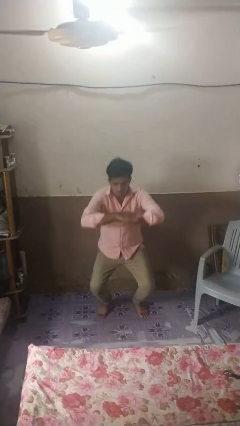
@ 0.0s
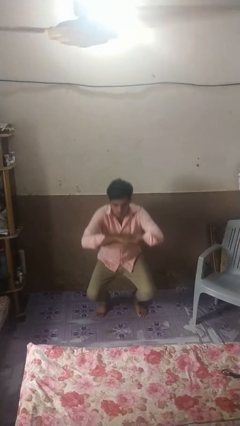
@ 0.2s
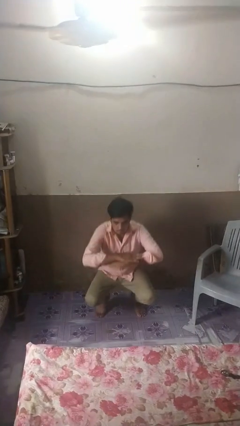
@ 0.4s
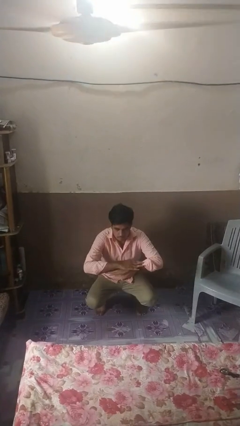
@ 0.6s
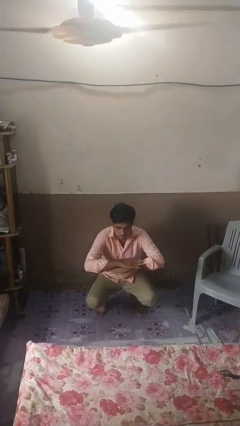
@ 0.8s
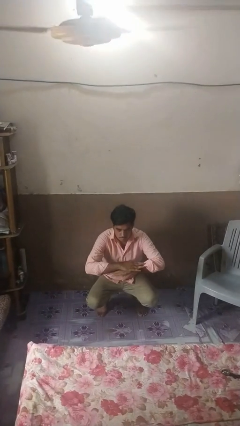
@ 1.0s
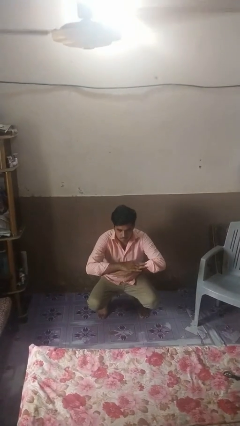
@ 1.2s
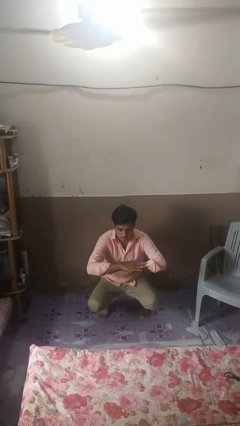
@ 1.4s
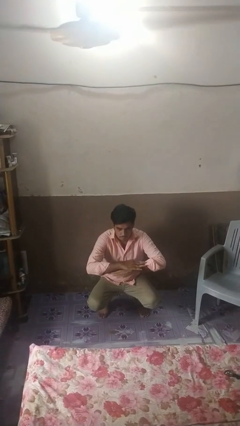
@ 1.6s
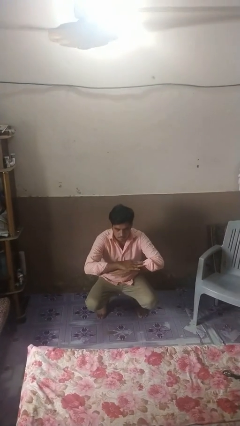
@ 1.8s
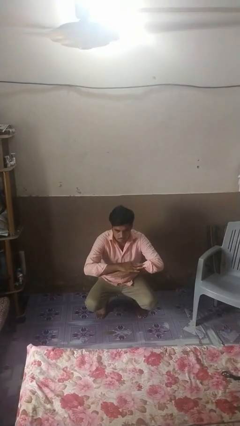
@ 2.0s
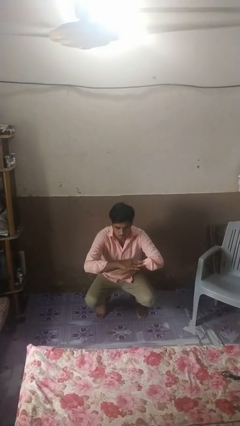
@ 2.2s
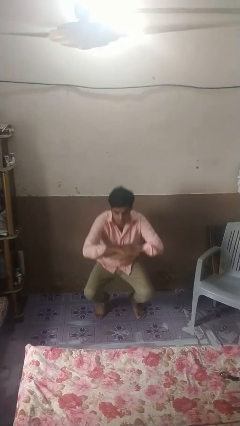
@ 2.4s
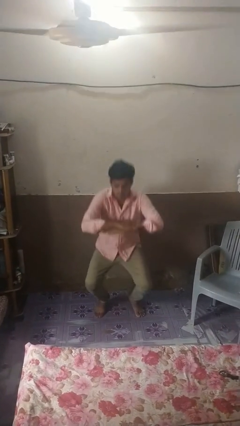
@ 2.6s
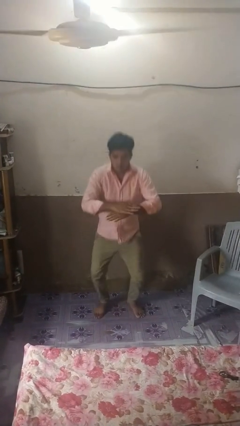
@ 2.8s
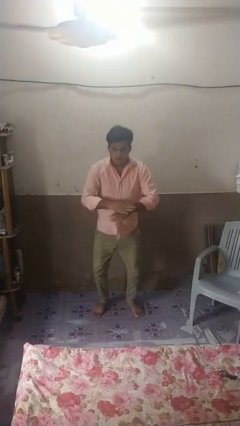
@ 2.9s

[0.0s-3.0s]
person squats

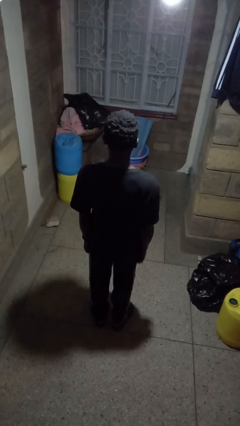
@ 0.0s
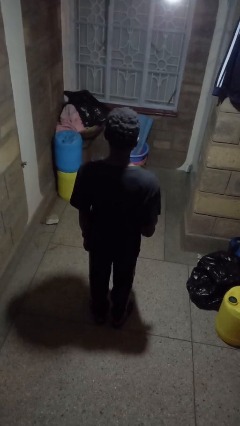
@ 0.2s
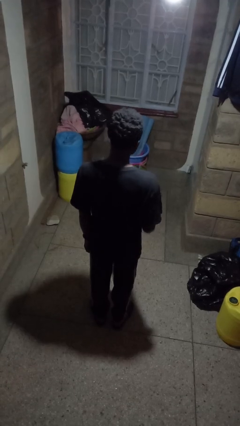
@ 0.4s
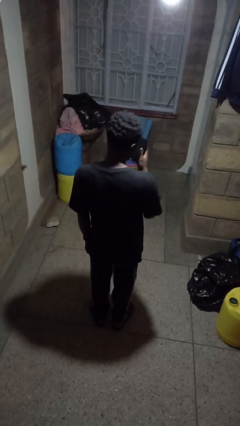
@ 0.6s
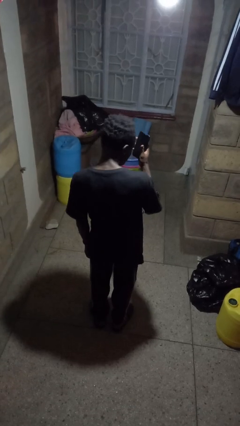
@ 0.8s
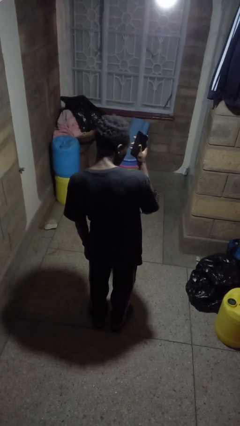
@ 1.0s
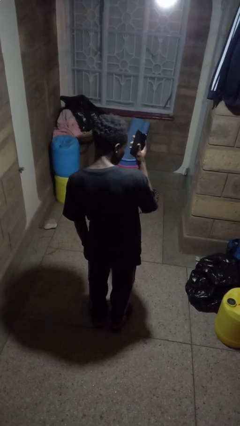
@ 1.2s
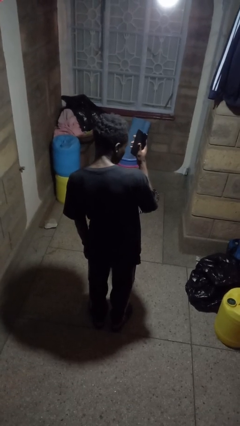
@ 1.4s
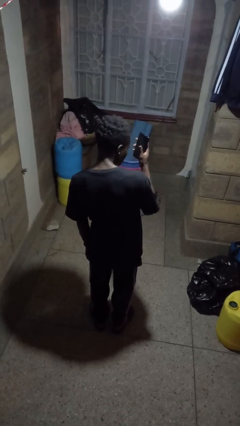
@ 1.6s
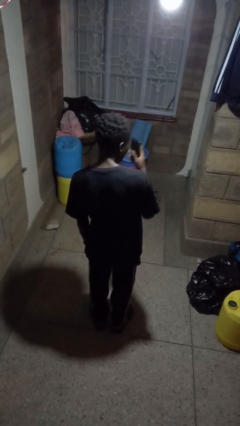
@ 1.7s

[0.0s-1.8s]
person takes selfie

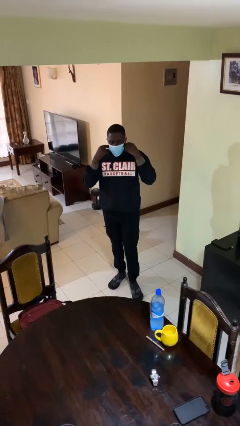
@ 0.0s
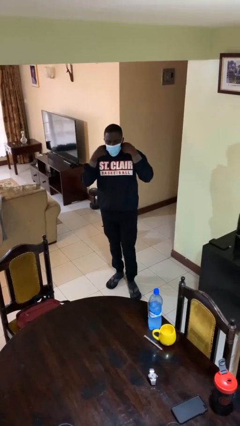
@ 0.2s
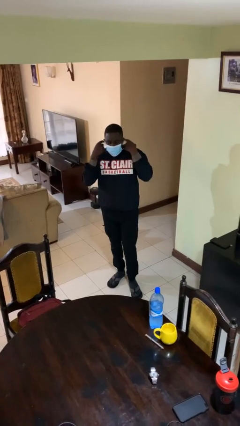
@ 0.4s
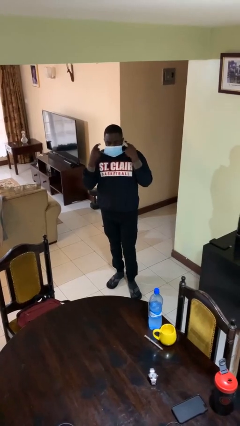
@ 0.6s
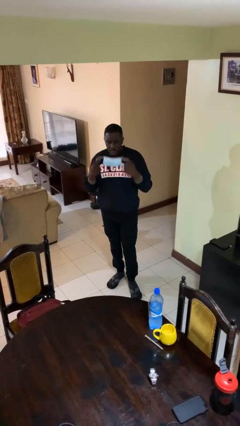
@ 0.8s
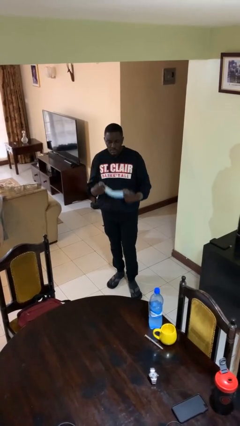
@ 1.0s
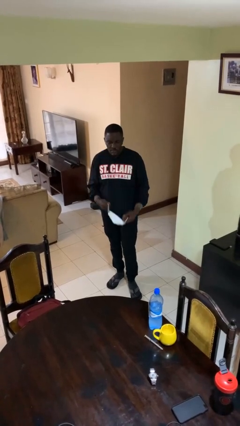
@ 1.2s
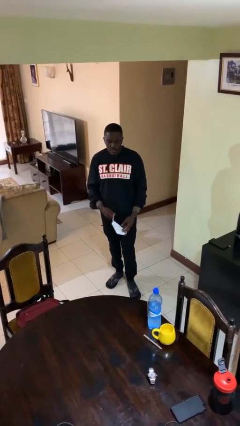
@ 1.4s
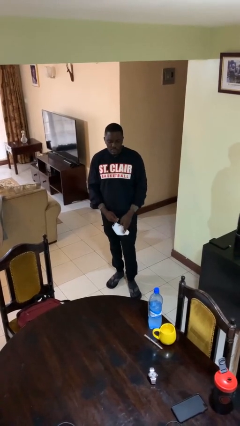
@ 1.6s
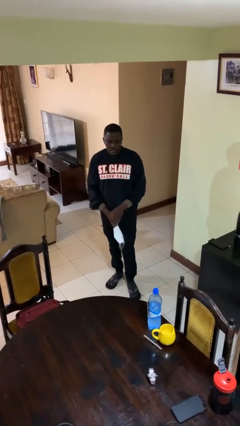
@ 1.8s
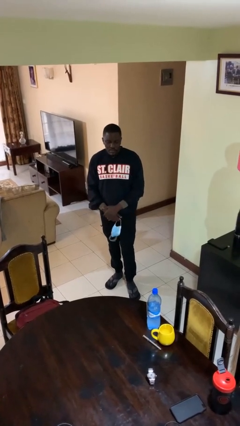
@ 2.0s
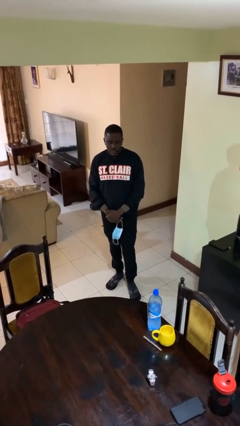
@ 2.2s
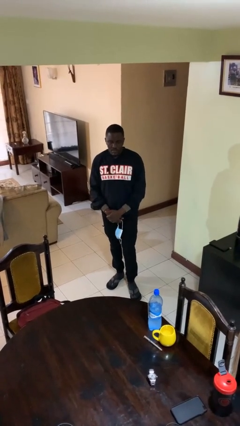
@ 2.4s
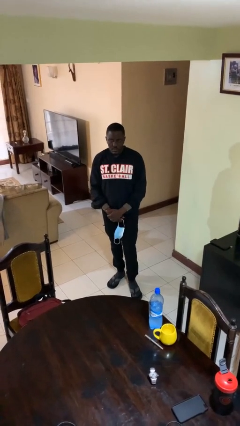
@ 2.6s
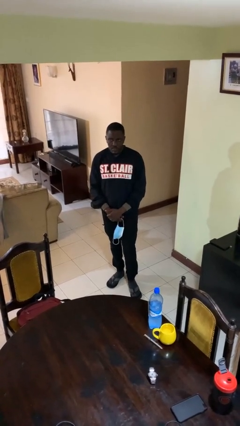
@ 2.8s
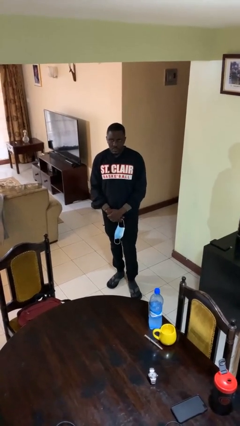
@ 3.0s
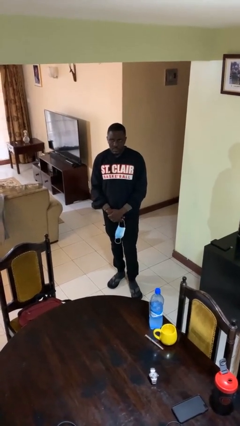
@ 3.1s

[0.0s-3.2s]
person takes off facemask

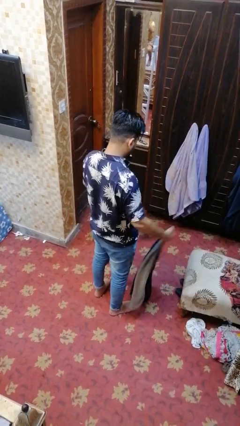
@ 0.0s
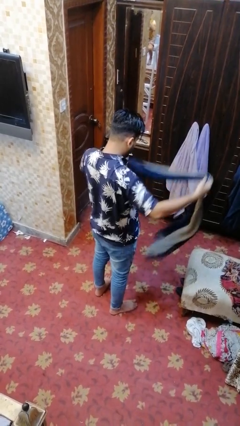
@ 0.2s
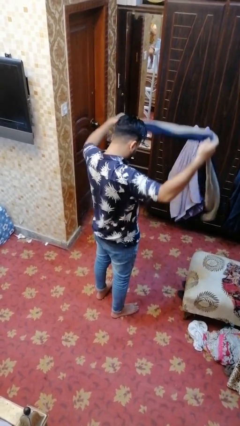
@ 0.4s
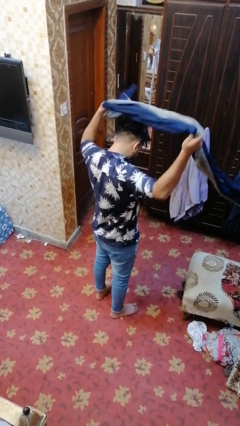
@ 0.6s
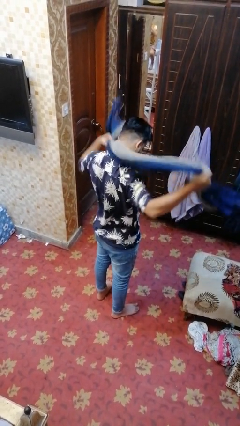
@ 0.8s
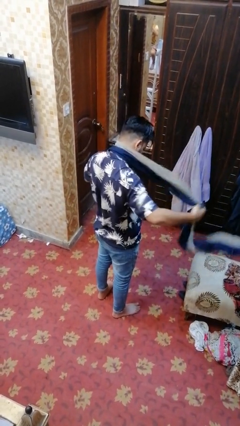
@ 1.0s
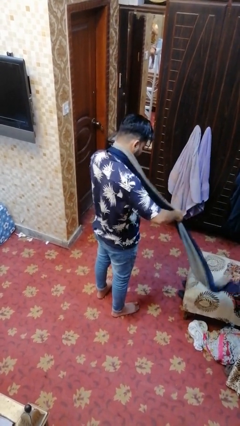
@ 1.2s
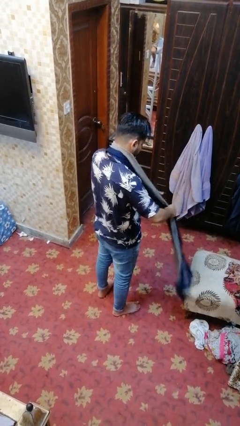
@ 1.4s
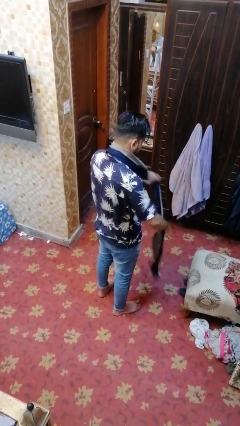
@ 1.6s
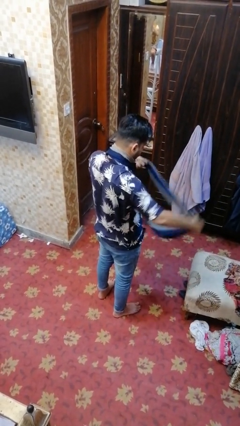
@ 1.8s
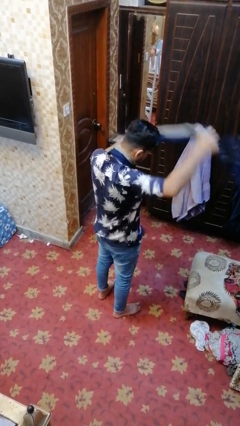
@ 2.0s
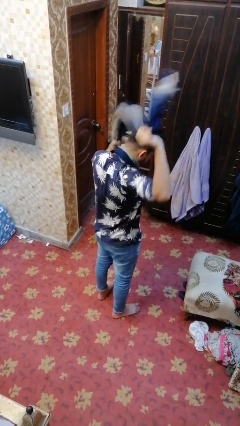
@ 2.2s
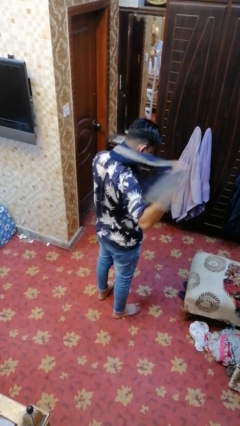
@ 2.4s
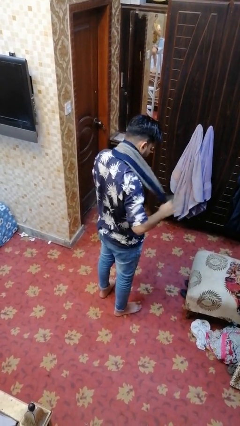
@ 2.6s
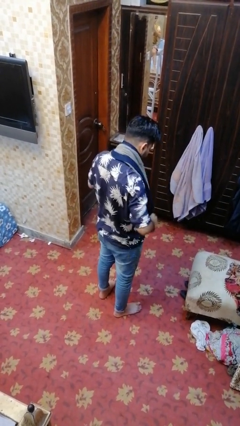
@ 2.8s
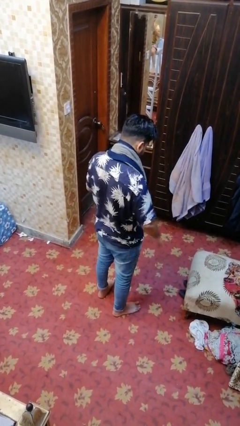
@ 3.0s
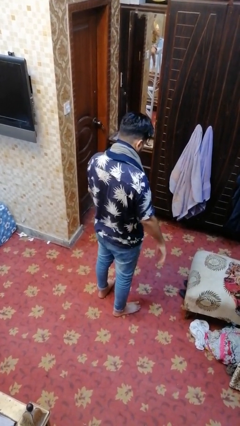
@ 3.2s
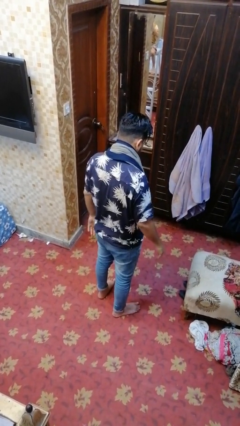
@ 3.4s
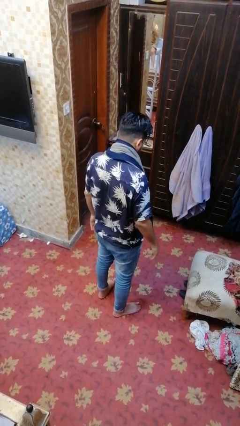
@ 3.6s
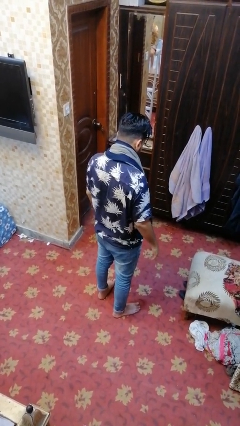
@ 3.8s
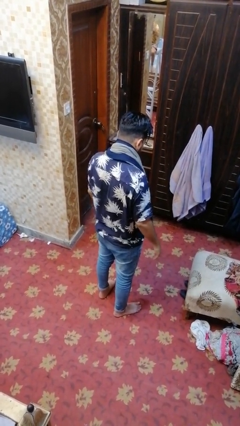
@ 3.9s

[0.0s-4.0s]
person puts on scarf

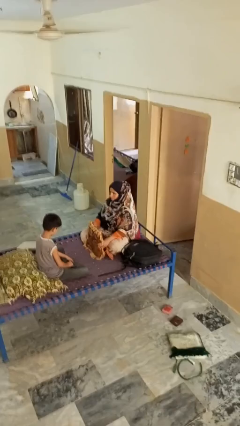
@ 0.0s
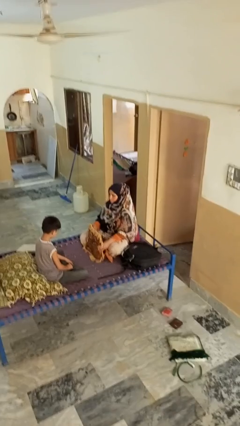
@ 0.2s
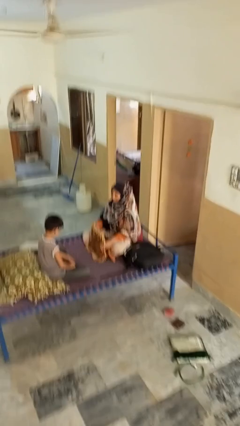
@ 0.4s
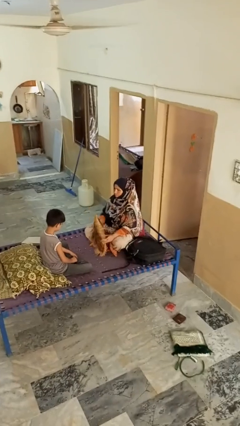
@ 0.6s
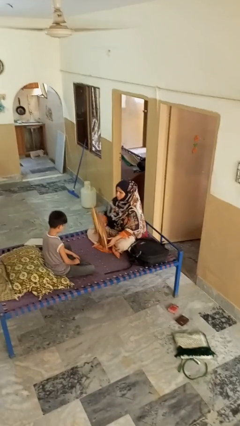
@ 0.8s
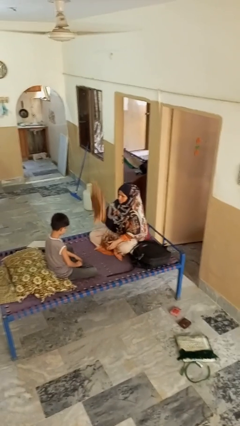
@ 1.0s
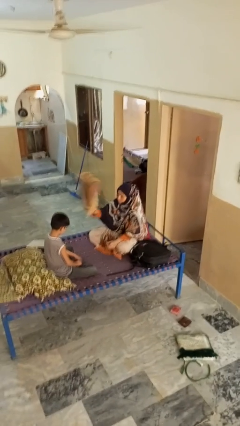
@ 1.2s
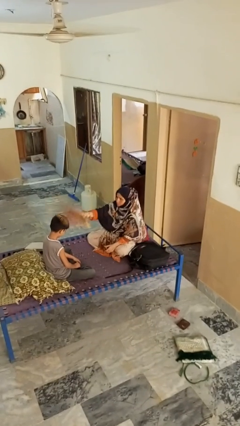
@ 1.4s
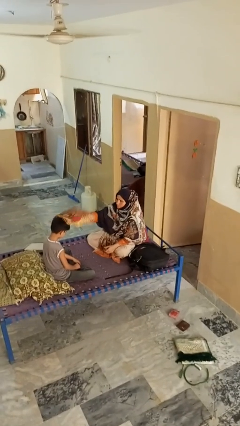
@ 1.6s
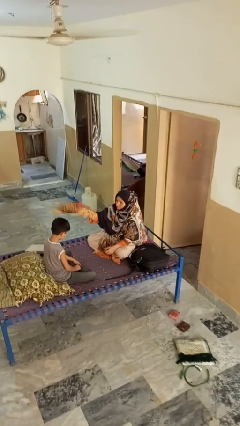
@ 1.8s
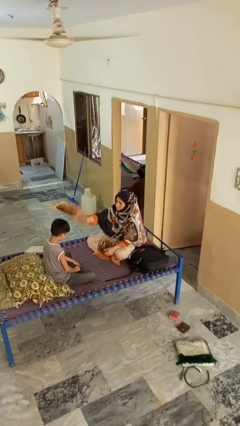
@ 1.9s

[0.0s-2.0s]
person hits person with pillow

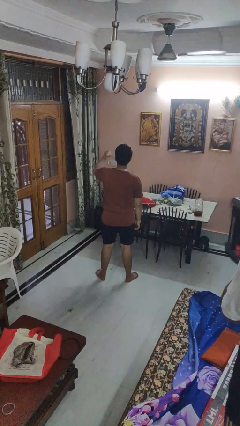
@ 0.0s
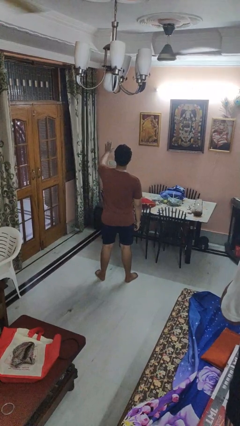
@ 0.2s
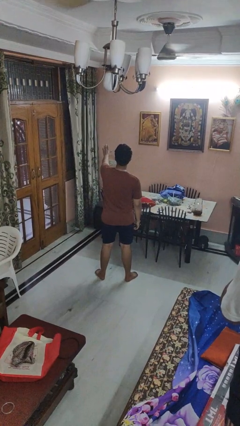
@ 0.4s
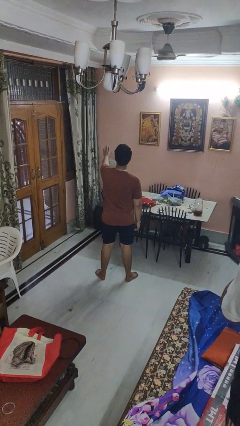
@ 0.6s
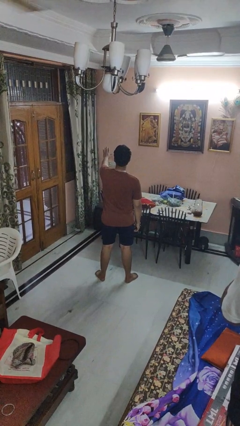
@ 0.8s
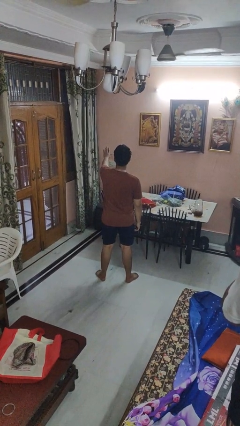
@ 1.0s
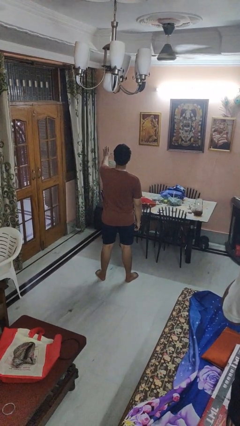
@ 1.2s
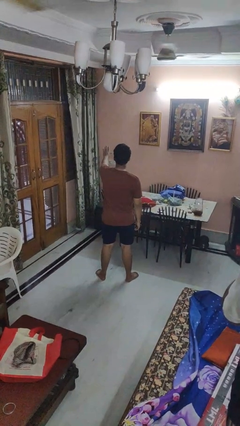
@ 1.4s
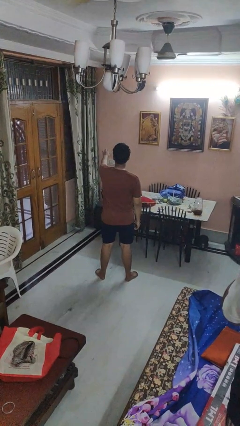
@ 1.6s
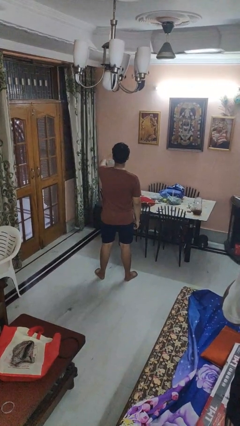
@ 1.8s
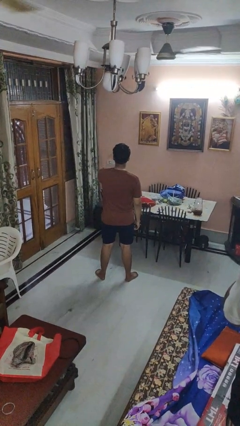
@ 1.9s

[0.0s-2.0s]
person gestures stop

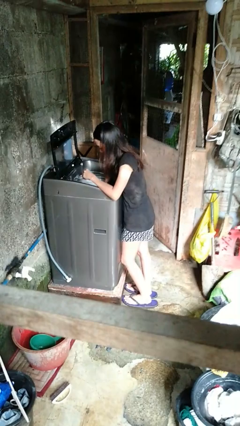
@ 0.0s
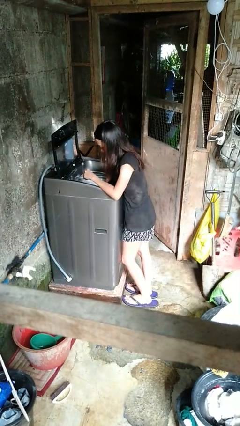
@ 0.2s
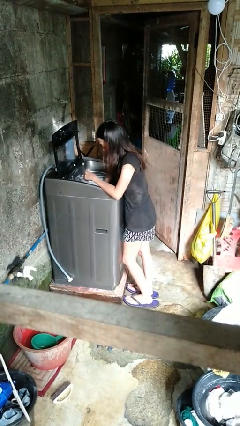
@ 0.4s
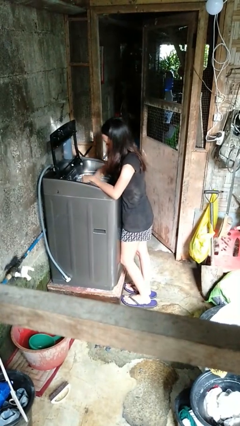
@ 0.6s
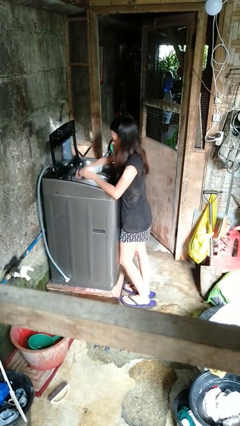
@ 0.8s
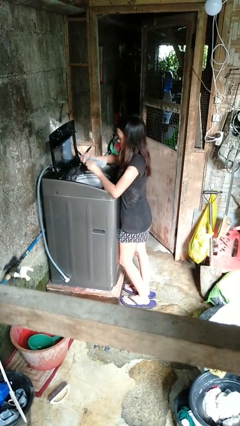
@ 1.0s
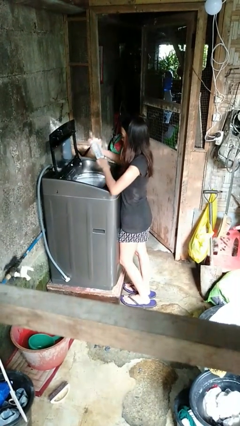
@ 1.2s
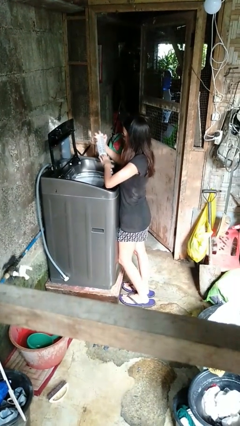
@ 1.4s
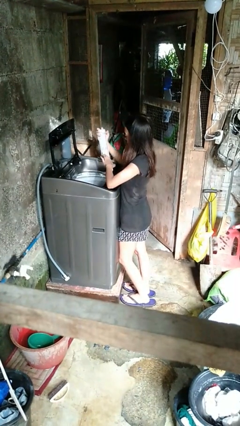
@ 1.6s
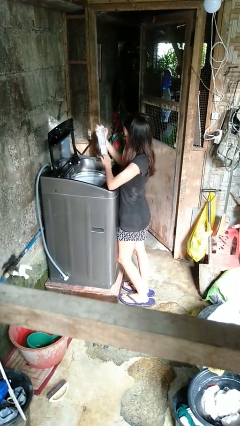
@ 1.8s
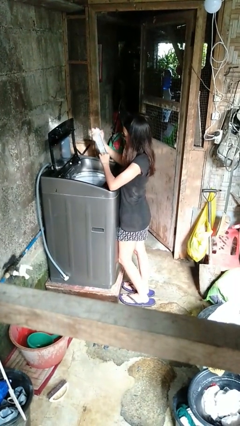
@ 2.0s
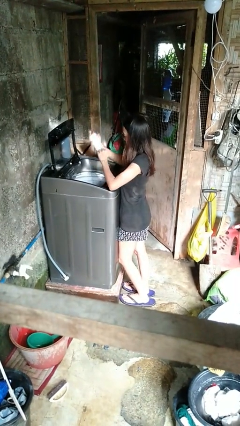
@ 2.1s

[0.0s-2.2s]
person cleans dryer lint trap
